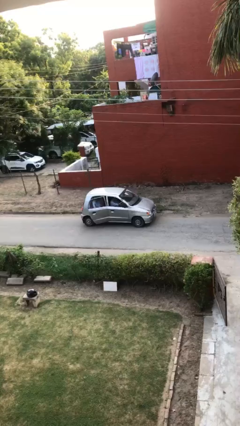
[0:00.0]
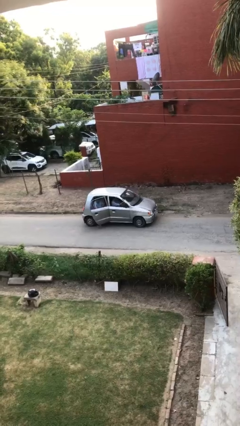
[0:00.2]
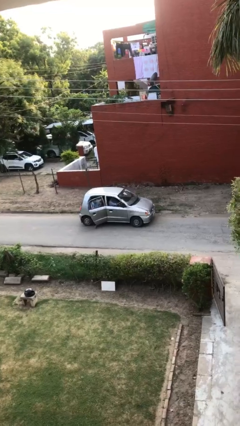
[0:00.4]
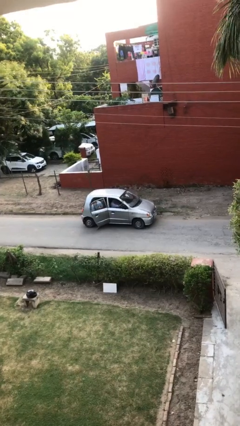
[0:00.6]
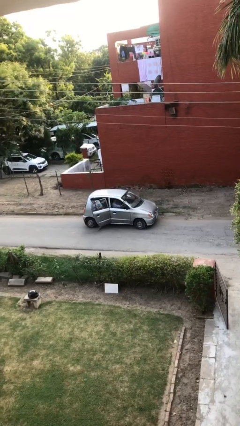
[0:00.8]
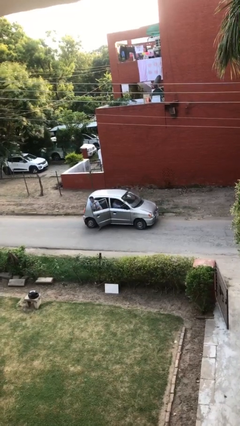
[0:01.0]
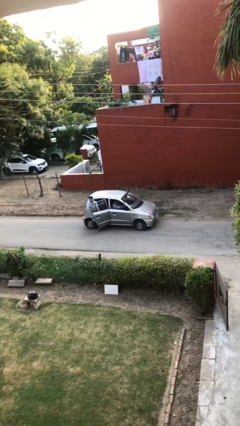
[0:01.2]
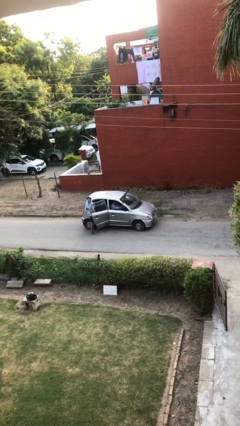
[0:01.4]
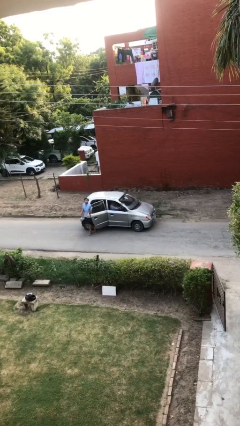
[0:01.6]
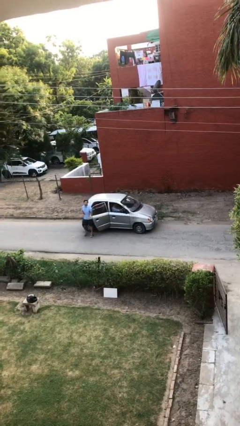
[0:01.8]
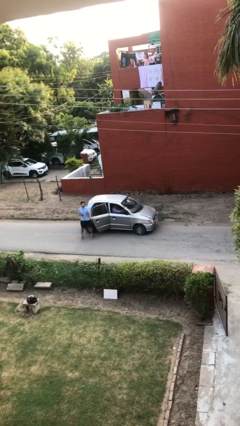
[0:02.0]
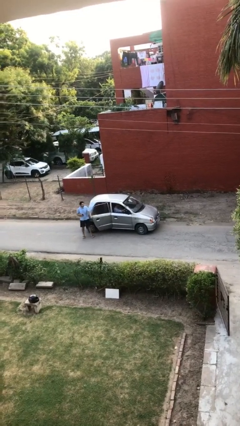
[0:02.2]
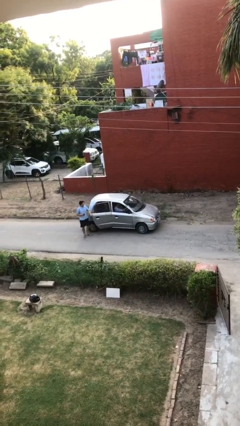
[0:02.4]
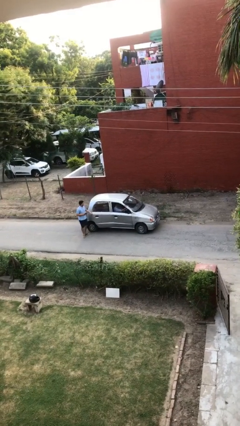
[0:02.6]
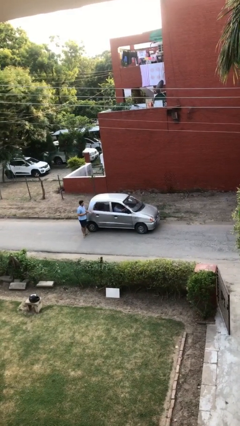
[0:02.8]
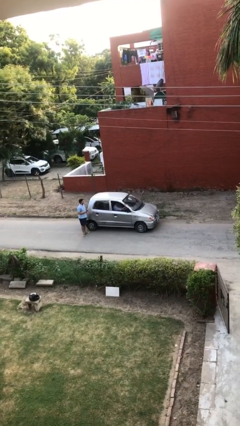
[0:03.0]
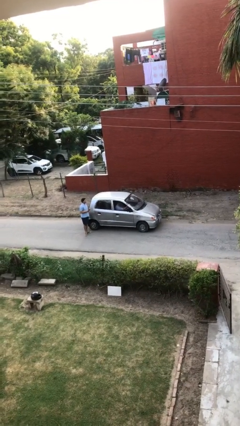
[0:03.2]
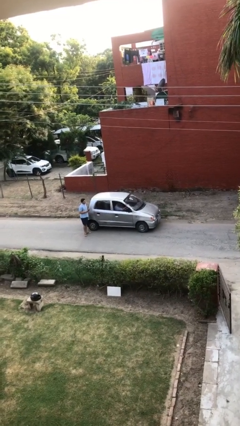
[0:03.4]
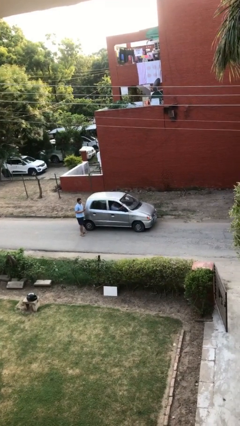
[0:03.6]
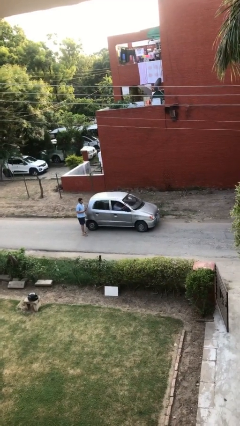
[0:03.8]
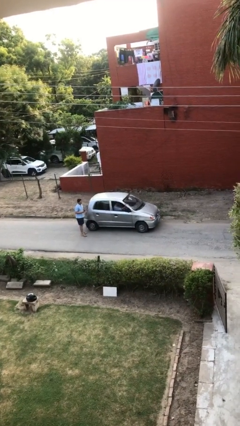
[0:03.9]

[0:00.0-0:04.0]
car drops off person

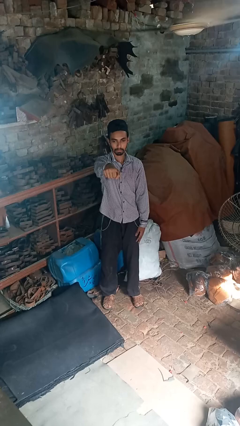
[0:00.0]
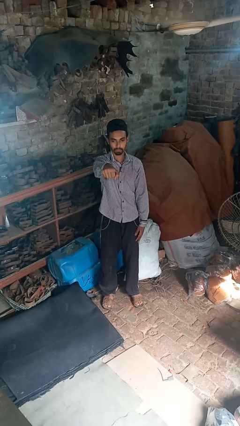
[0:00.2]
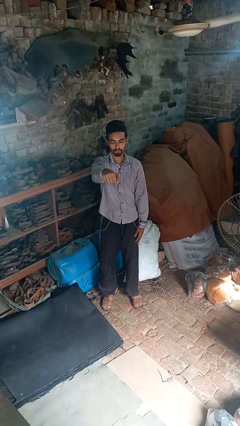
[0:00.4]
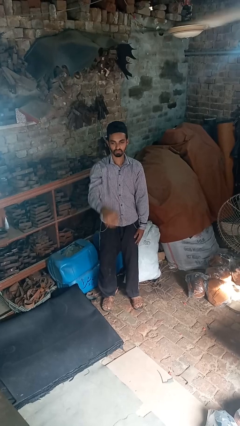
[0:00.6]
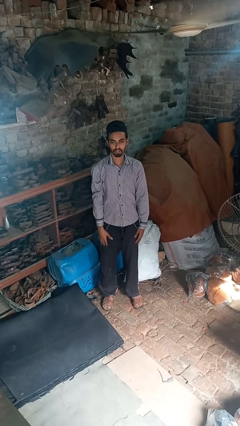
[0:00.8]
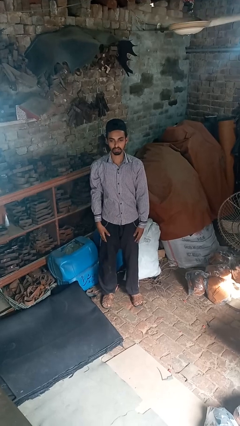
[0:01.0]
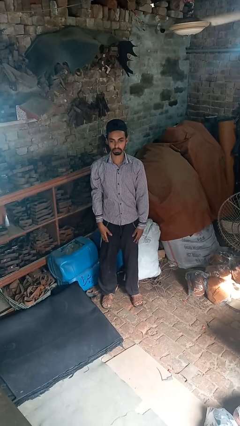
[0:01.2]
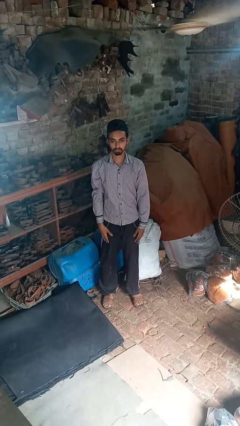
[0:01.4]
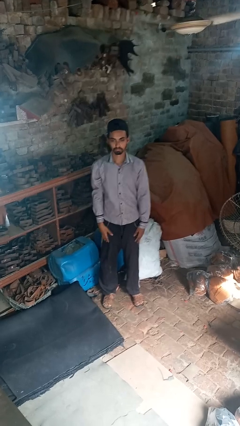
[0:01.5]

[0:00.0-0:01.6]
person punches

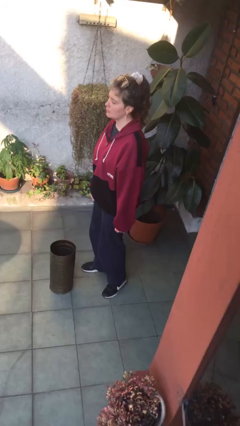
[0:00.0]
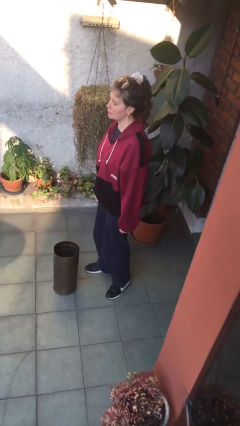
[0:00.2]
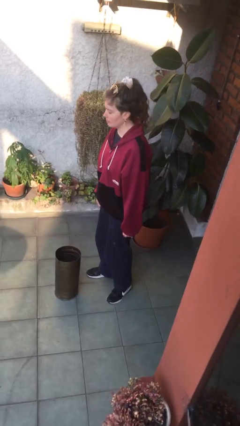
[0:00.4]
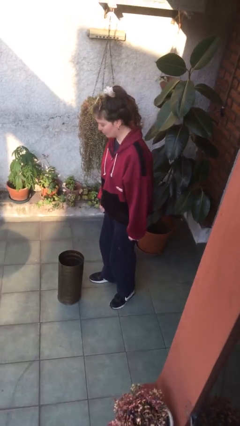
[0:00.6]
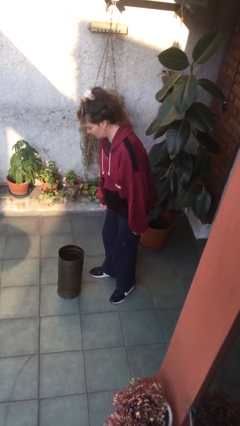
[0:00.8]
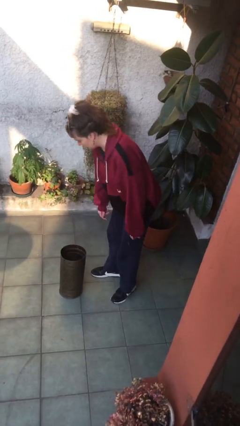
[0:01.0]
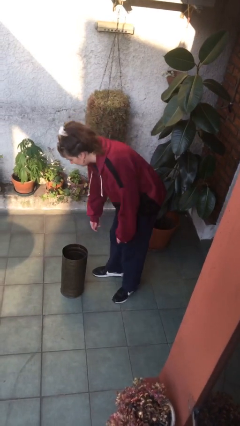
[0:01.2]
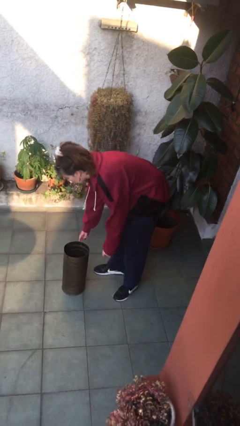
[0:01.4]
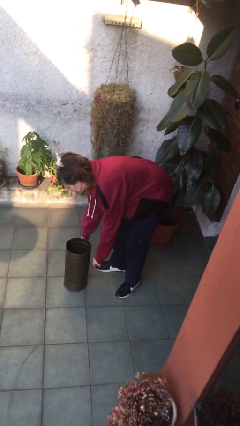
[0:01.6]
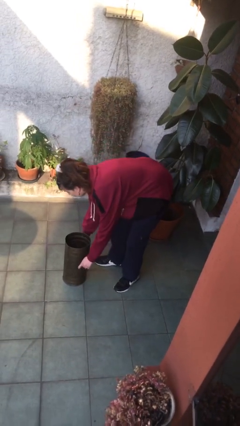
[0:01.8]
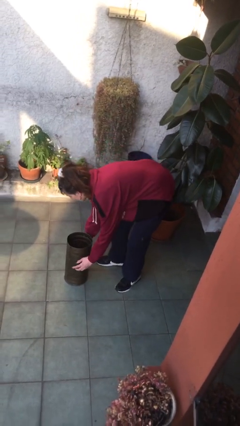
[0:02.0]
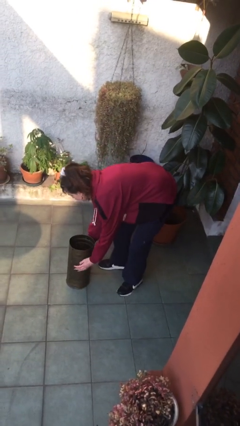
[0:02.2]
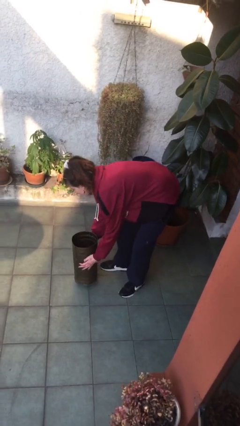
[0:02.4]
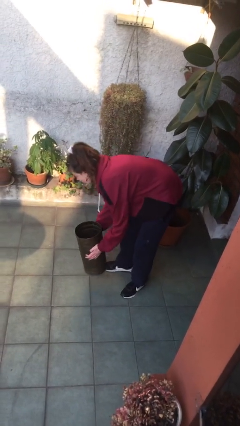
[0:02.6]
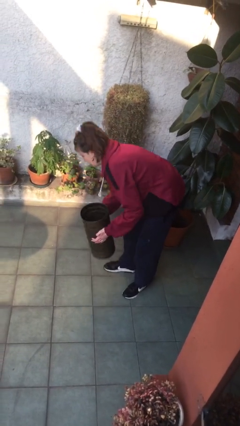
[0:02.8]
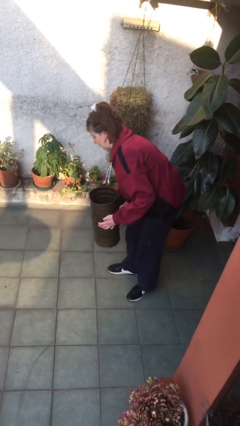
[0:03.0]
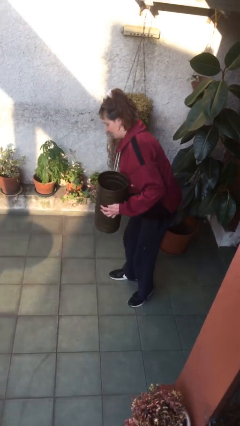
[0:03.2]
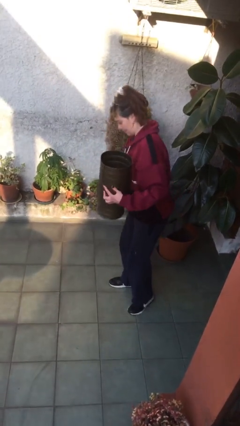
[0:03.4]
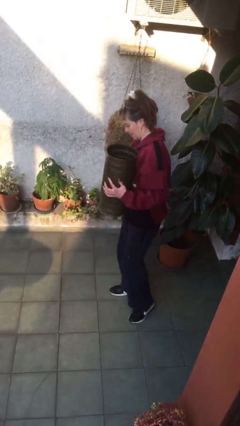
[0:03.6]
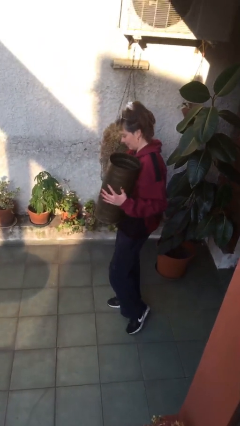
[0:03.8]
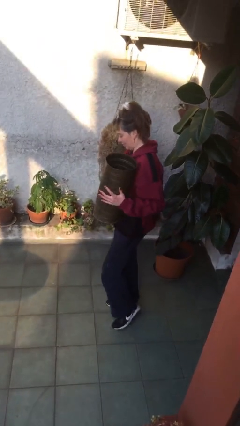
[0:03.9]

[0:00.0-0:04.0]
person picks up object from floor

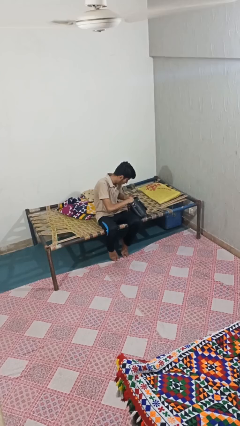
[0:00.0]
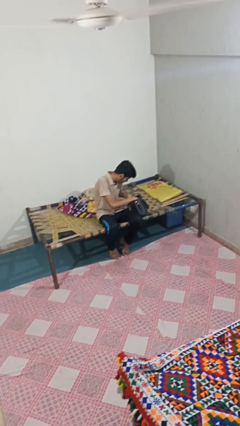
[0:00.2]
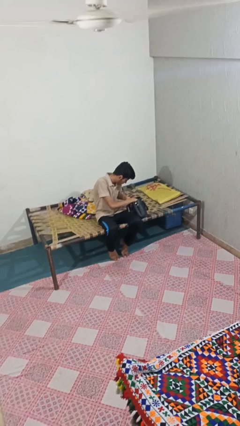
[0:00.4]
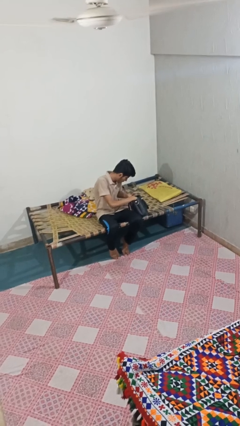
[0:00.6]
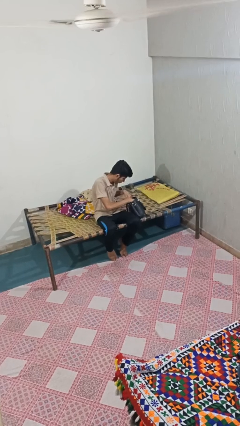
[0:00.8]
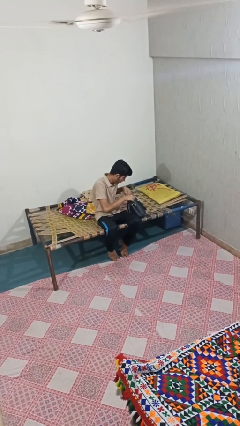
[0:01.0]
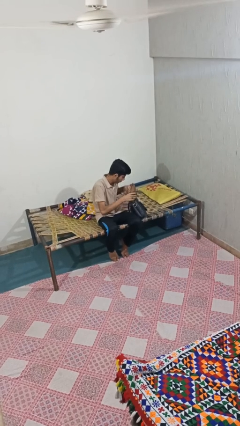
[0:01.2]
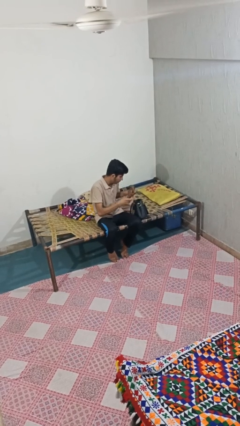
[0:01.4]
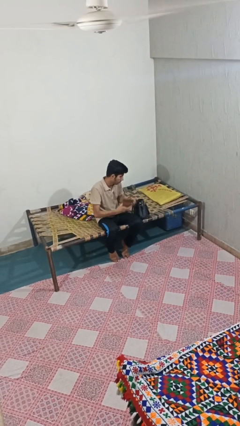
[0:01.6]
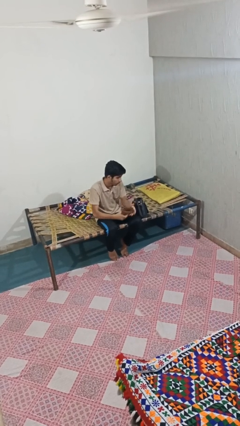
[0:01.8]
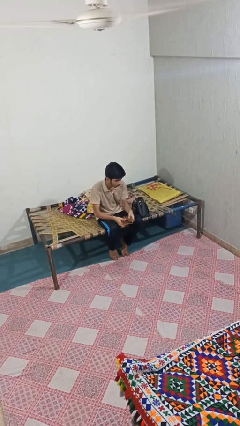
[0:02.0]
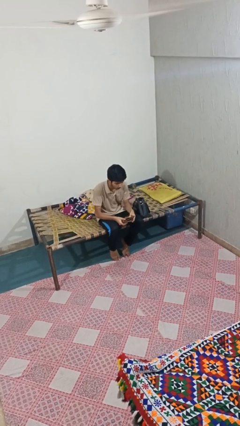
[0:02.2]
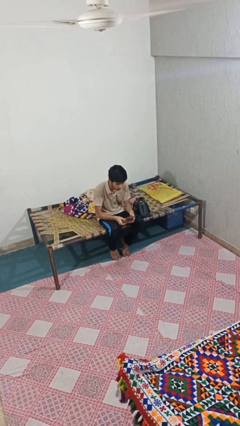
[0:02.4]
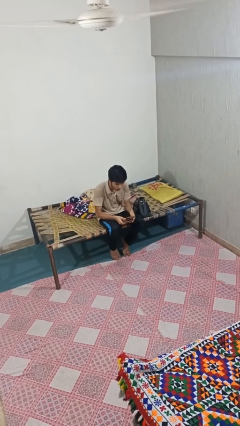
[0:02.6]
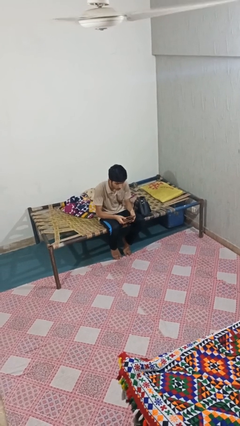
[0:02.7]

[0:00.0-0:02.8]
person takes object from purse

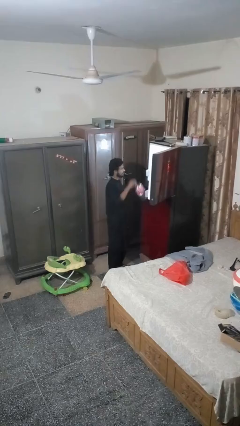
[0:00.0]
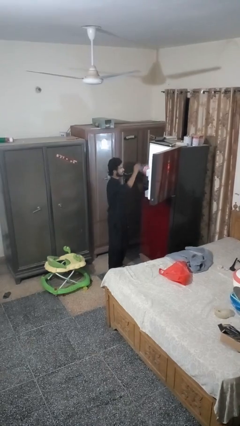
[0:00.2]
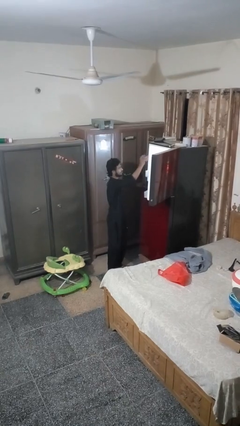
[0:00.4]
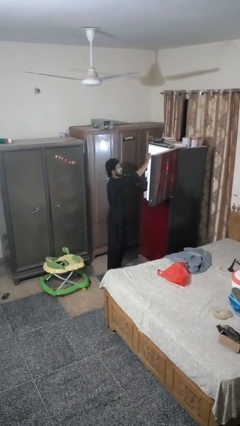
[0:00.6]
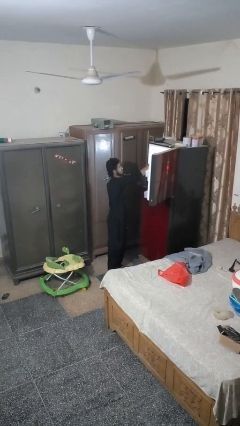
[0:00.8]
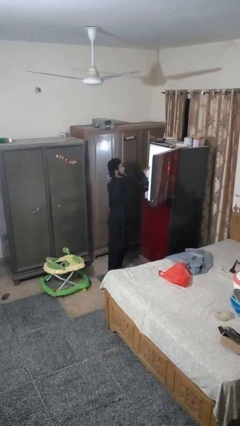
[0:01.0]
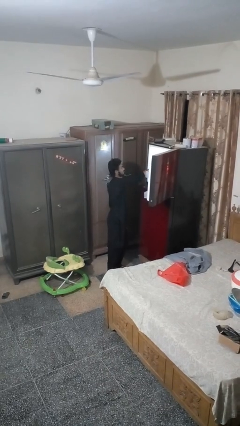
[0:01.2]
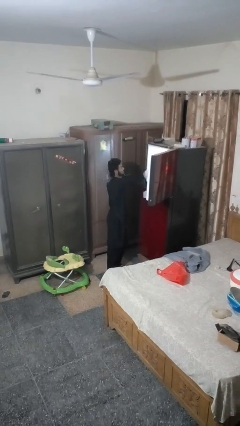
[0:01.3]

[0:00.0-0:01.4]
person puts object into refrigerator

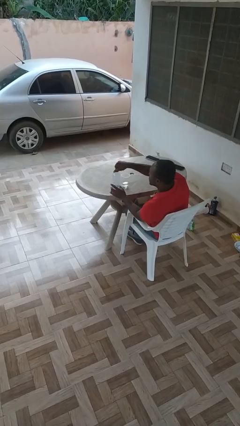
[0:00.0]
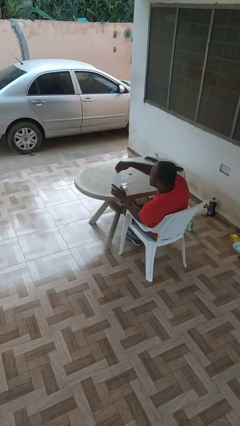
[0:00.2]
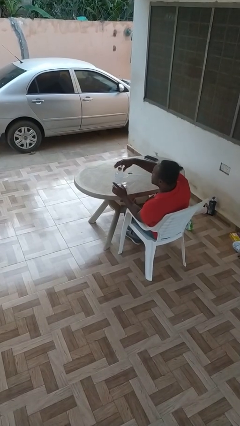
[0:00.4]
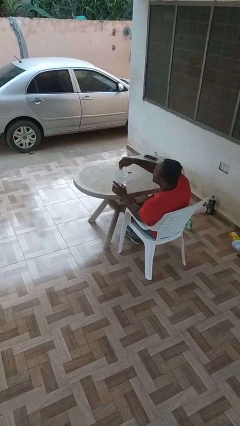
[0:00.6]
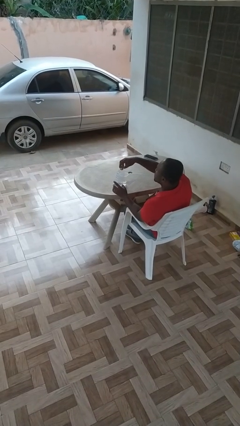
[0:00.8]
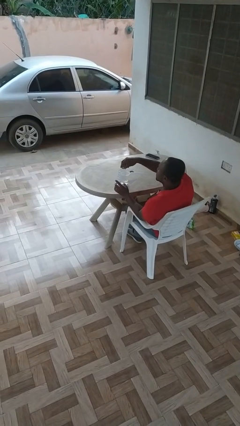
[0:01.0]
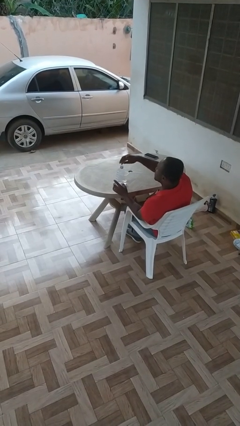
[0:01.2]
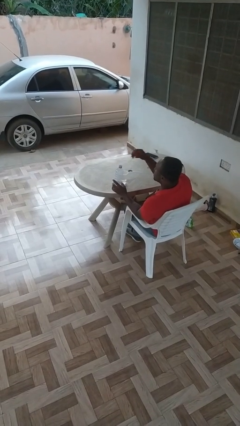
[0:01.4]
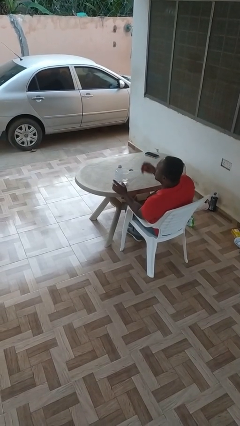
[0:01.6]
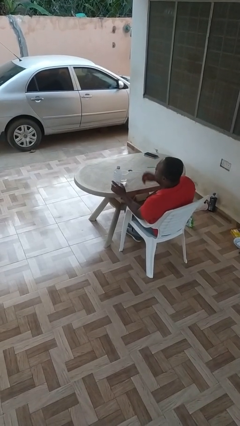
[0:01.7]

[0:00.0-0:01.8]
person unscrews lid from bottle

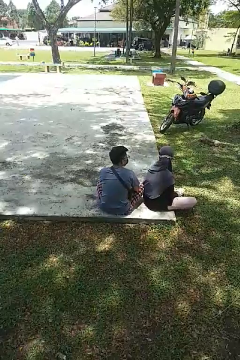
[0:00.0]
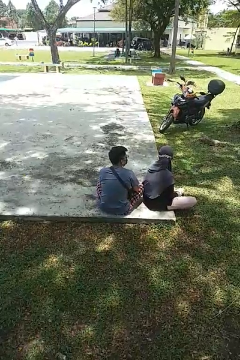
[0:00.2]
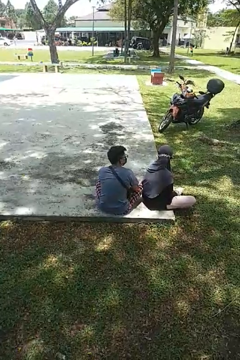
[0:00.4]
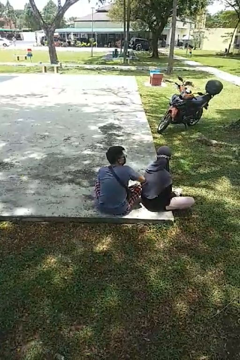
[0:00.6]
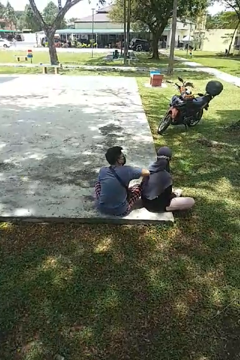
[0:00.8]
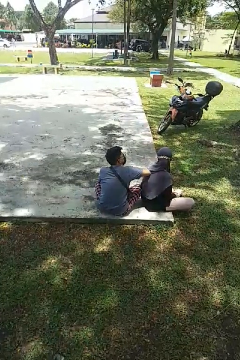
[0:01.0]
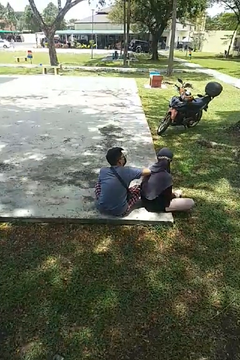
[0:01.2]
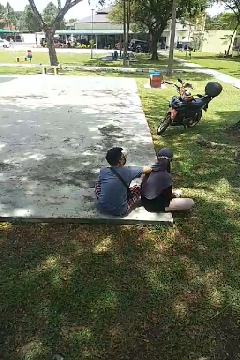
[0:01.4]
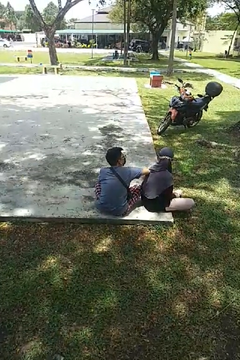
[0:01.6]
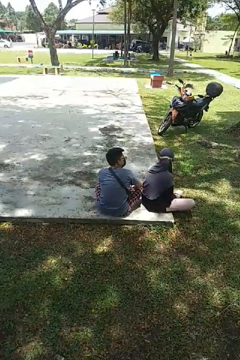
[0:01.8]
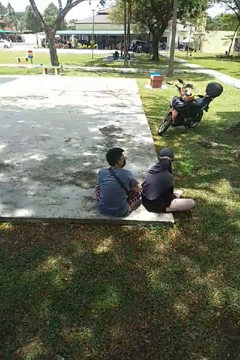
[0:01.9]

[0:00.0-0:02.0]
person nudges person with elbow
